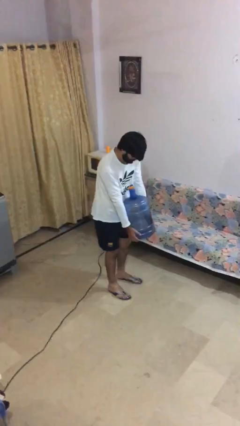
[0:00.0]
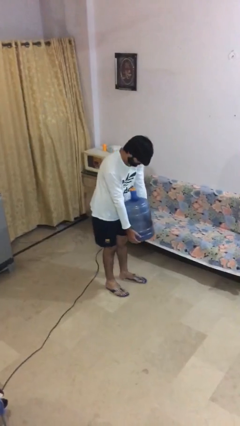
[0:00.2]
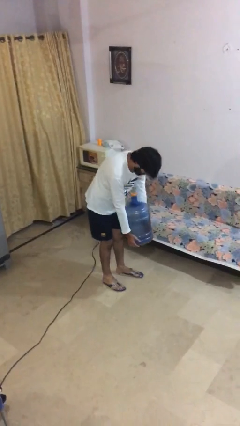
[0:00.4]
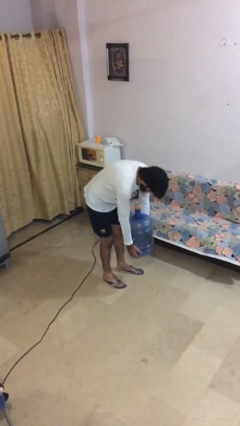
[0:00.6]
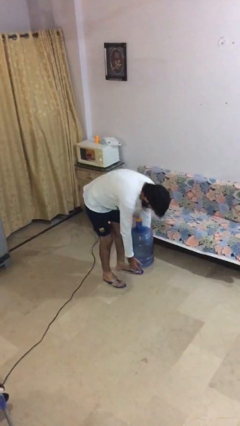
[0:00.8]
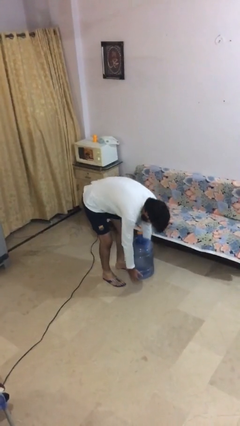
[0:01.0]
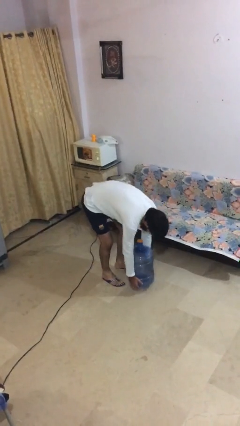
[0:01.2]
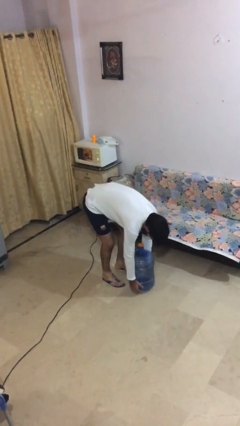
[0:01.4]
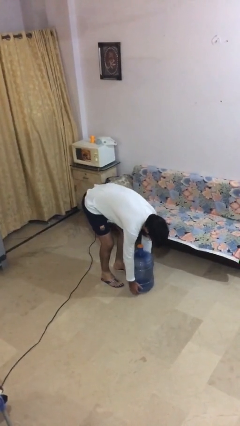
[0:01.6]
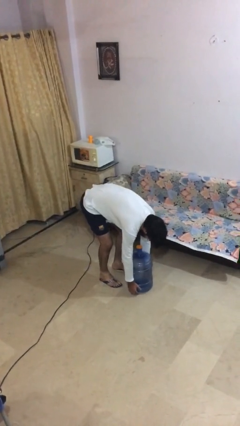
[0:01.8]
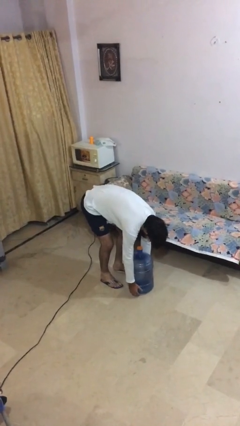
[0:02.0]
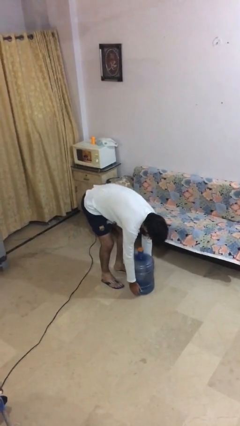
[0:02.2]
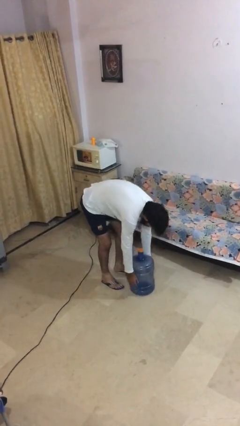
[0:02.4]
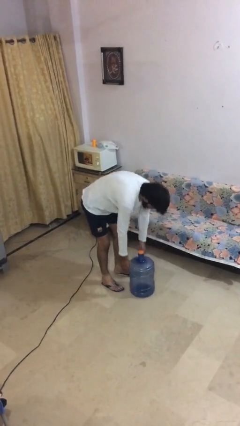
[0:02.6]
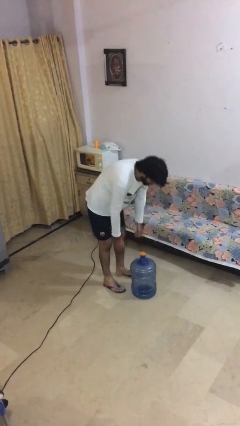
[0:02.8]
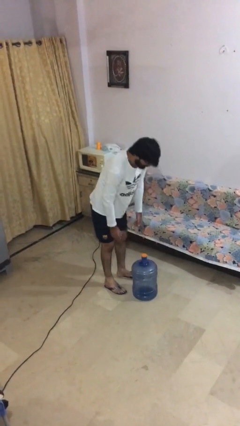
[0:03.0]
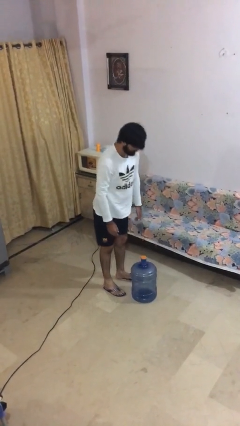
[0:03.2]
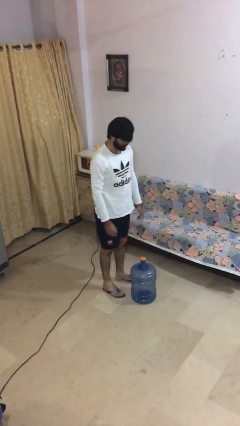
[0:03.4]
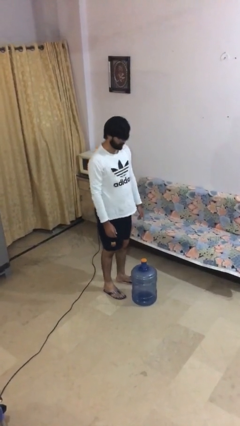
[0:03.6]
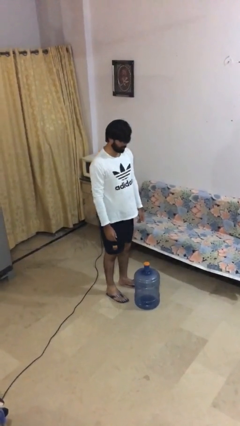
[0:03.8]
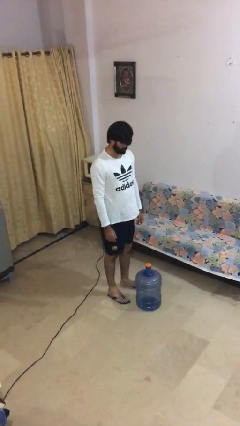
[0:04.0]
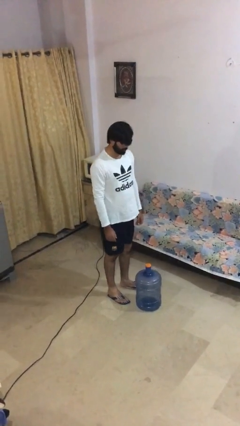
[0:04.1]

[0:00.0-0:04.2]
person puts down object on floor

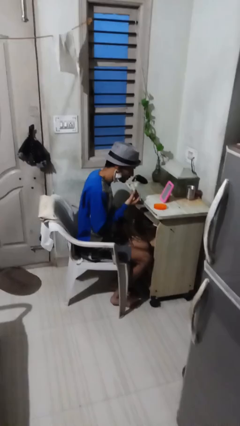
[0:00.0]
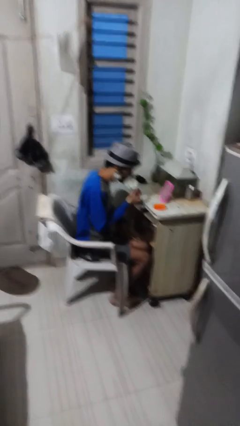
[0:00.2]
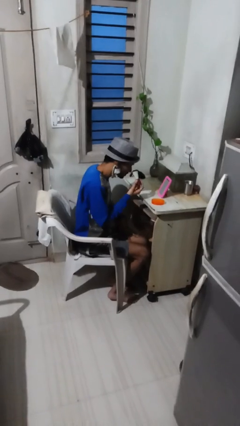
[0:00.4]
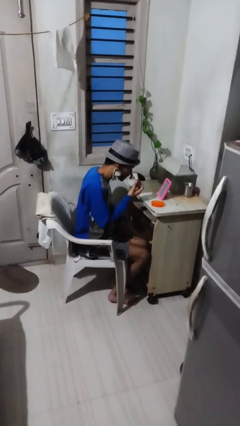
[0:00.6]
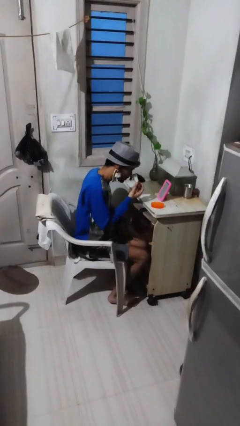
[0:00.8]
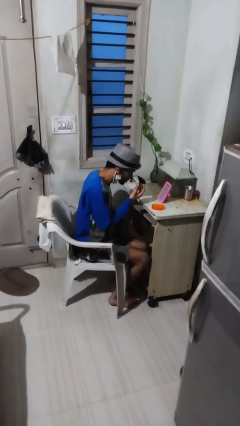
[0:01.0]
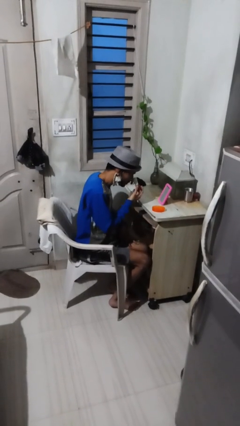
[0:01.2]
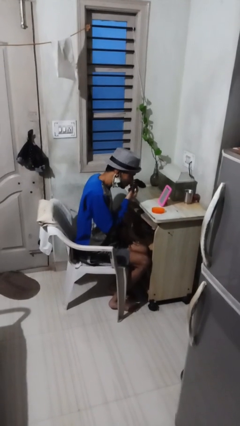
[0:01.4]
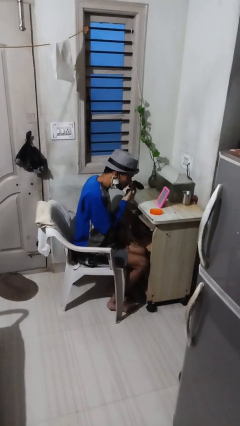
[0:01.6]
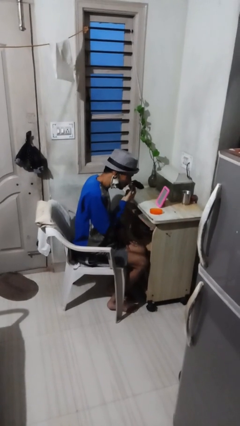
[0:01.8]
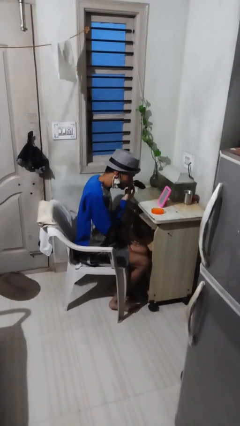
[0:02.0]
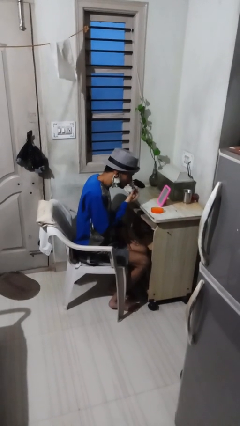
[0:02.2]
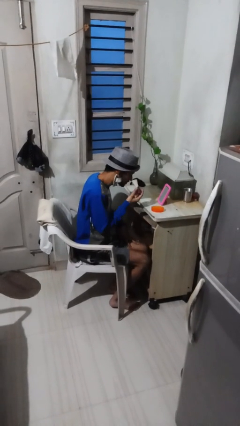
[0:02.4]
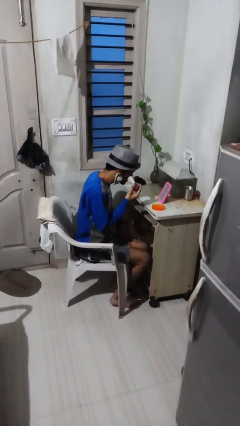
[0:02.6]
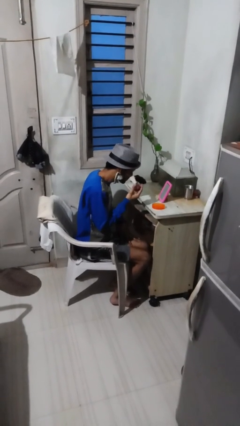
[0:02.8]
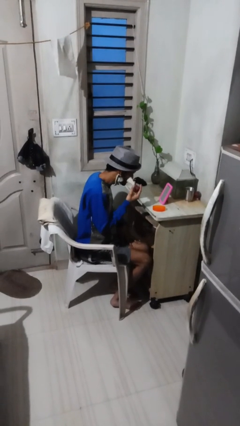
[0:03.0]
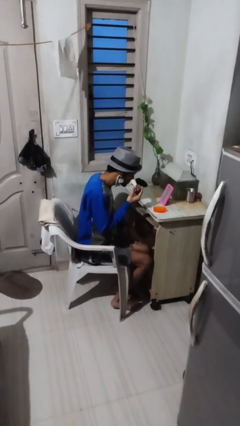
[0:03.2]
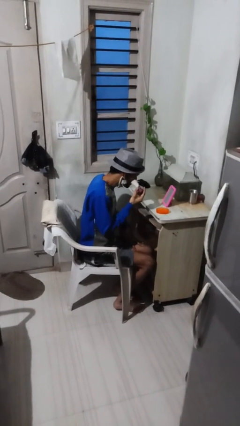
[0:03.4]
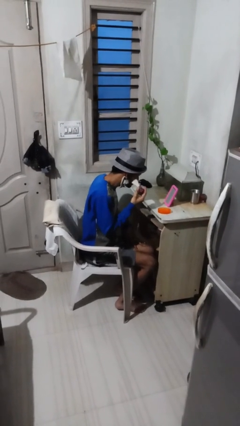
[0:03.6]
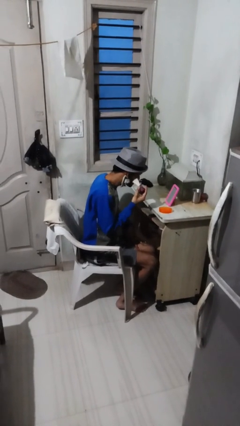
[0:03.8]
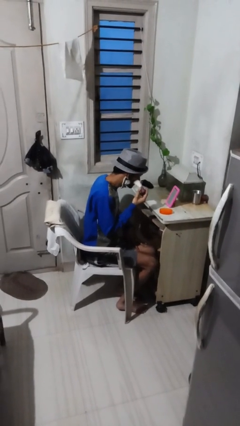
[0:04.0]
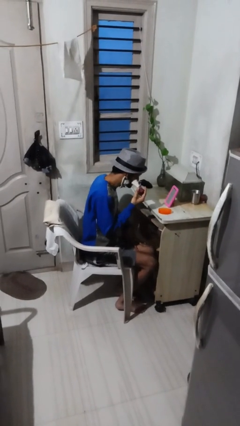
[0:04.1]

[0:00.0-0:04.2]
person applies foundation makeup

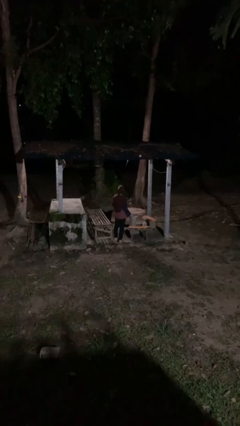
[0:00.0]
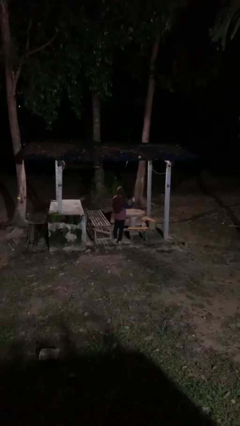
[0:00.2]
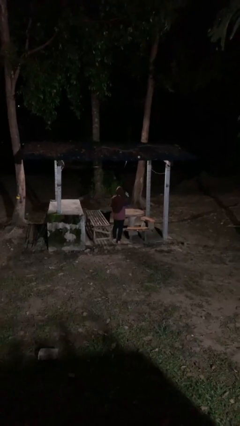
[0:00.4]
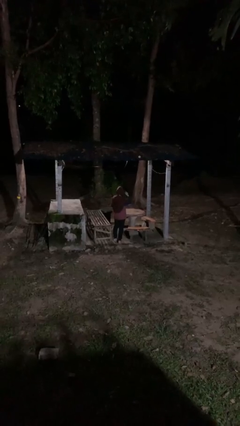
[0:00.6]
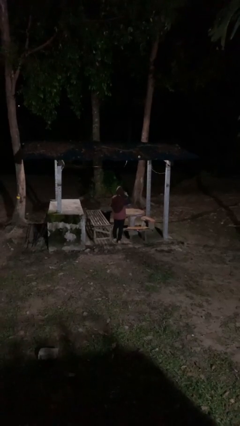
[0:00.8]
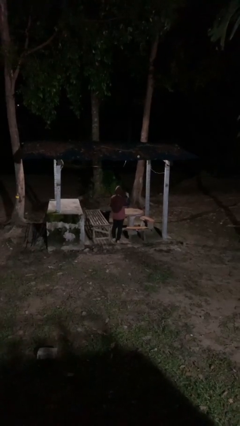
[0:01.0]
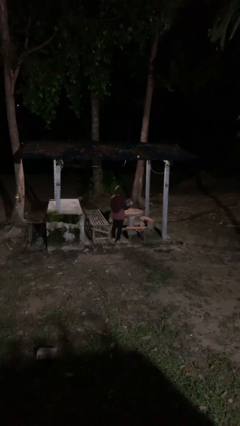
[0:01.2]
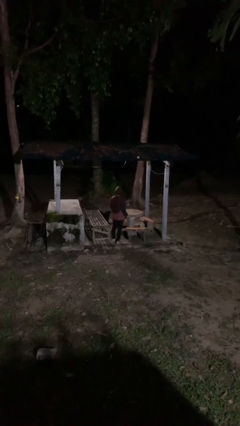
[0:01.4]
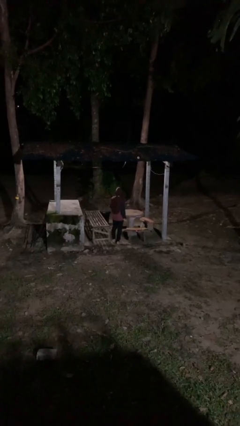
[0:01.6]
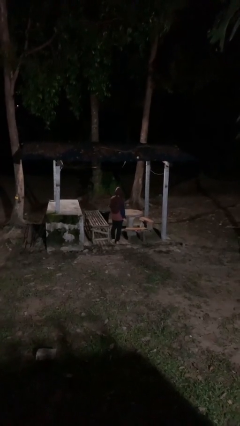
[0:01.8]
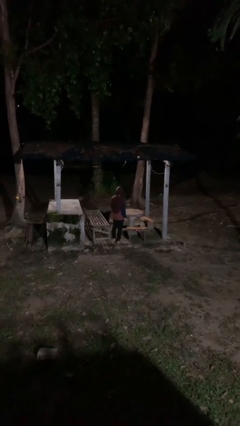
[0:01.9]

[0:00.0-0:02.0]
person gestures listen closely

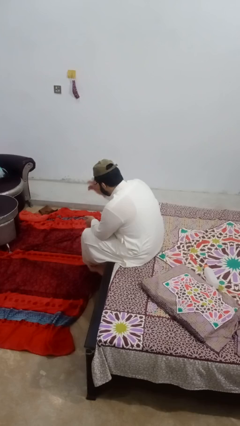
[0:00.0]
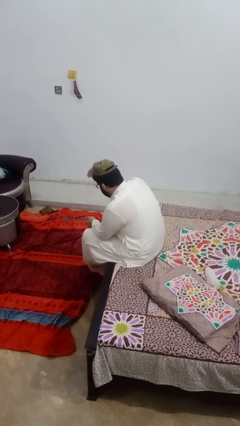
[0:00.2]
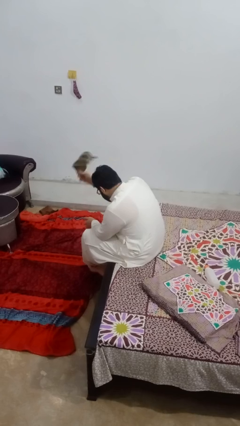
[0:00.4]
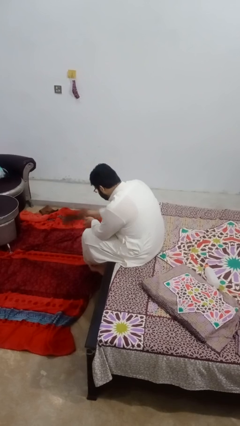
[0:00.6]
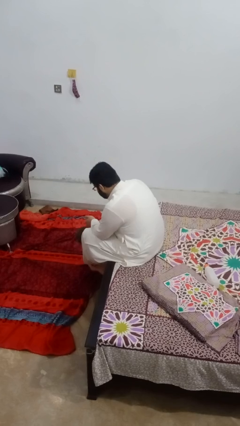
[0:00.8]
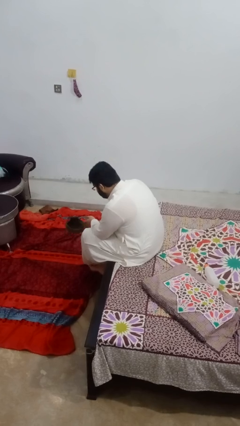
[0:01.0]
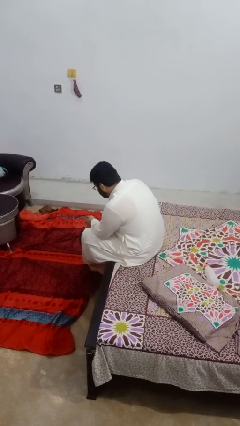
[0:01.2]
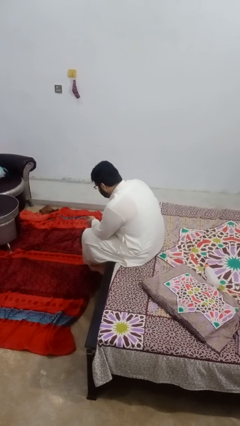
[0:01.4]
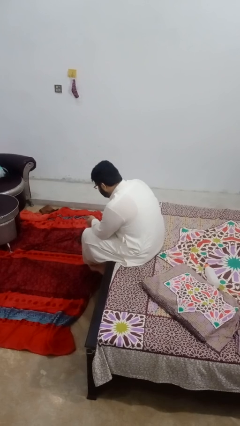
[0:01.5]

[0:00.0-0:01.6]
person takes off hat

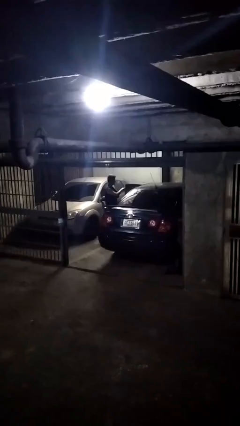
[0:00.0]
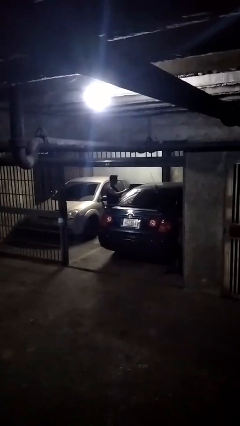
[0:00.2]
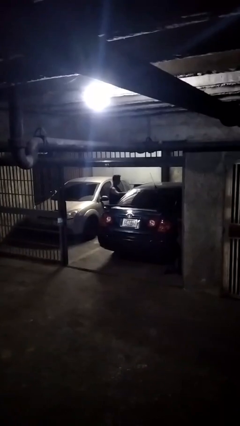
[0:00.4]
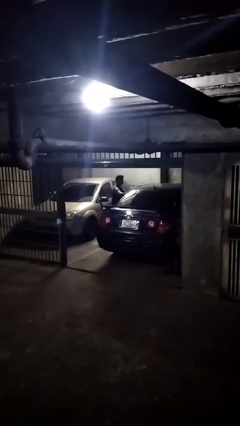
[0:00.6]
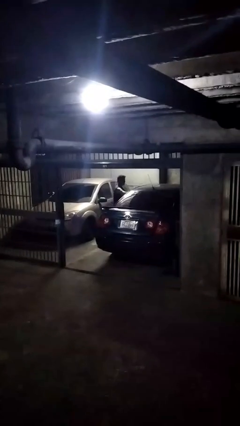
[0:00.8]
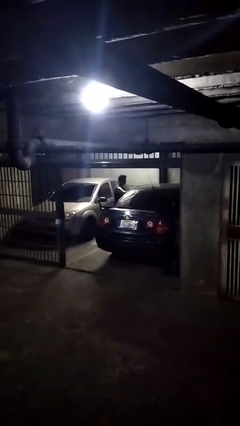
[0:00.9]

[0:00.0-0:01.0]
person closes car door

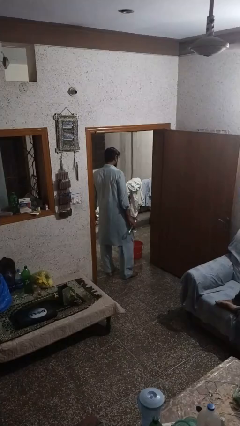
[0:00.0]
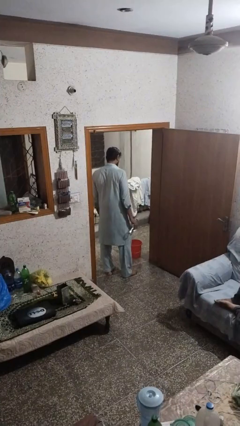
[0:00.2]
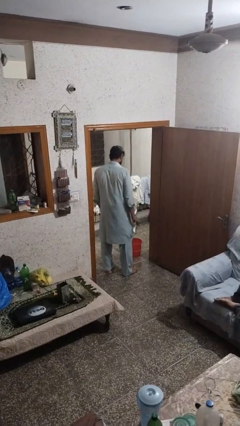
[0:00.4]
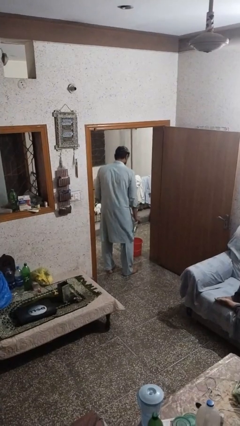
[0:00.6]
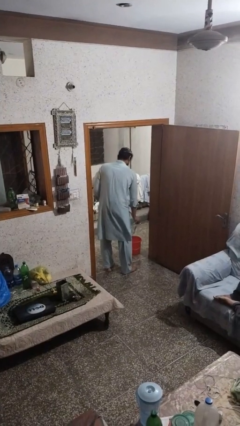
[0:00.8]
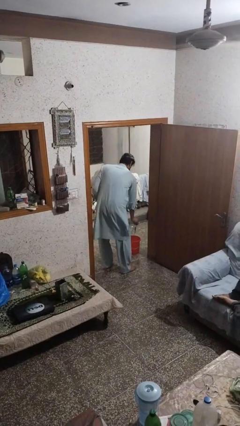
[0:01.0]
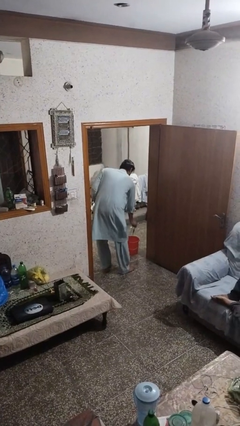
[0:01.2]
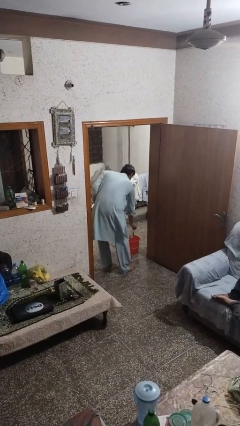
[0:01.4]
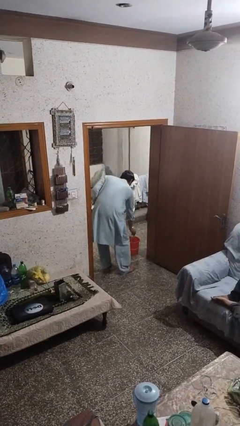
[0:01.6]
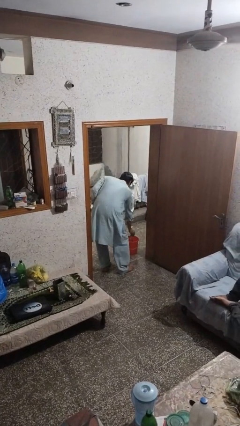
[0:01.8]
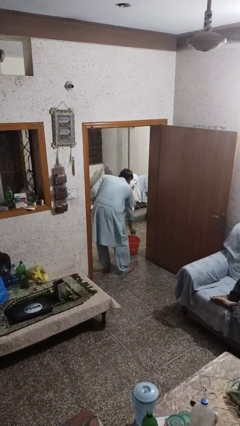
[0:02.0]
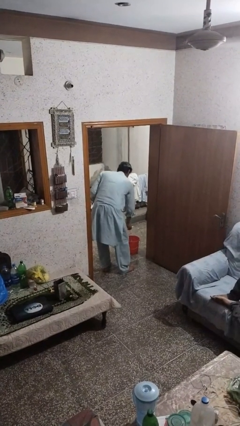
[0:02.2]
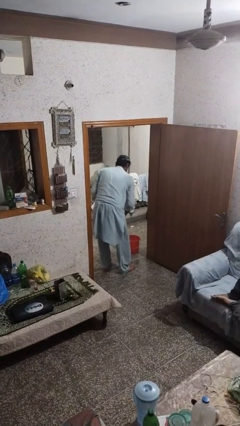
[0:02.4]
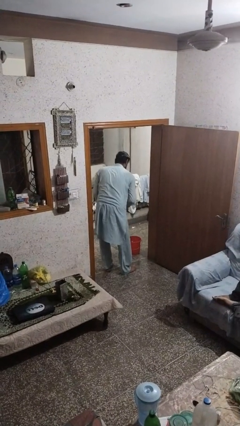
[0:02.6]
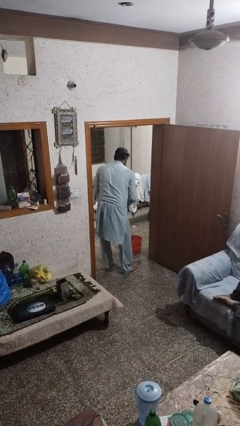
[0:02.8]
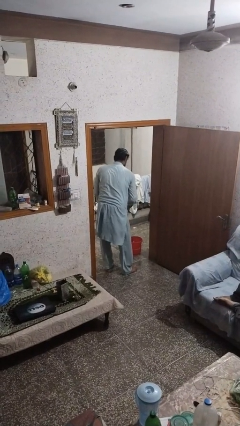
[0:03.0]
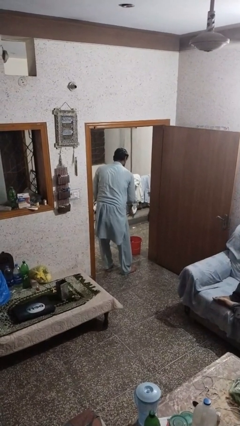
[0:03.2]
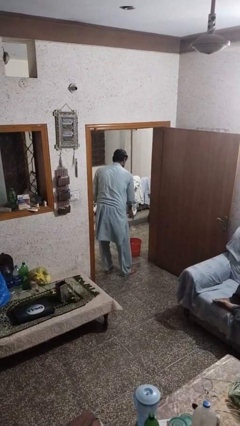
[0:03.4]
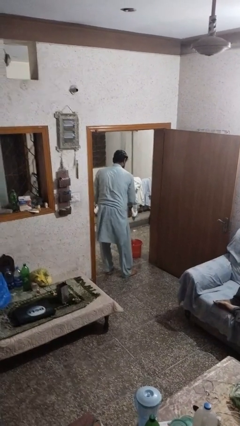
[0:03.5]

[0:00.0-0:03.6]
person discards trash

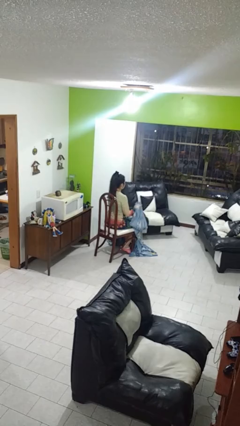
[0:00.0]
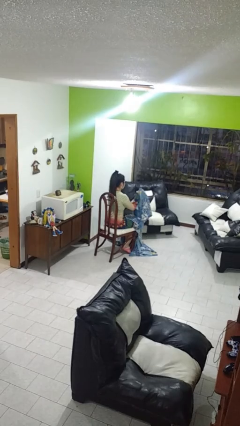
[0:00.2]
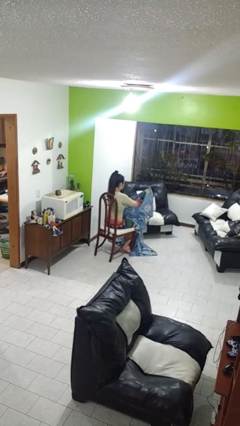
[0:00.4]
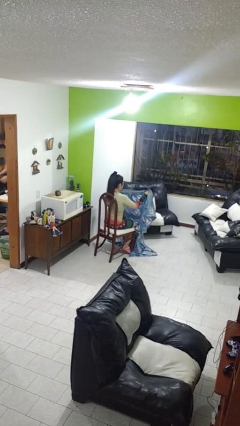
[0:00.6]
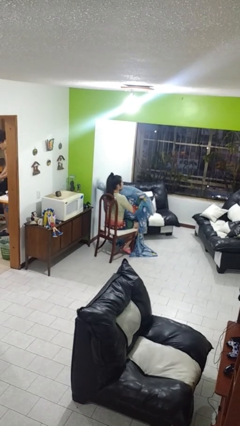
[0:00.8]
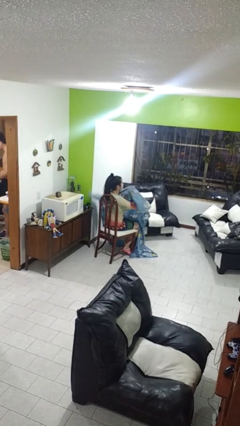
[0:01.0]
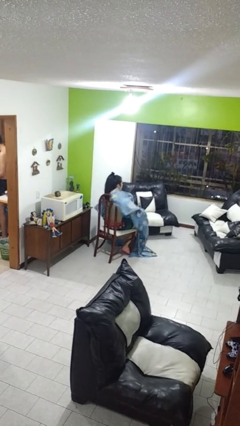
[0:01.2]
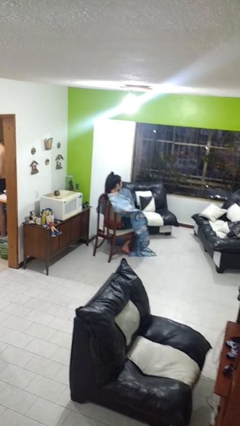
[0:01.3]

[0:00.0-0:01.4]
person covers with blanket
